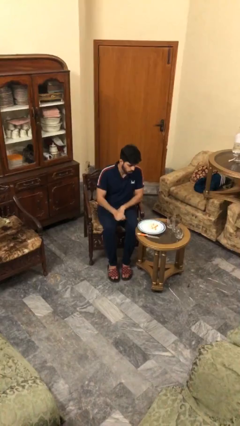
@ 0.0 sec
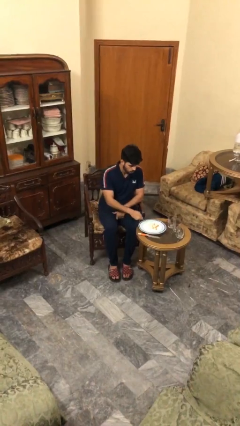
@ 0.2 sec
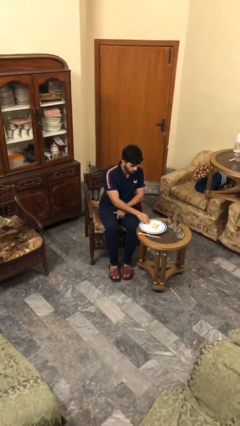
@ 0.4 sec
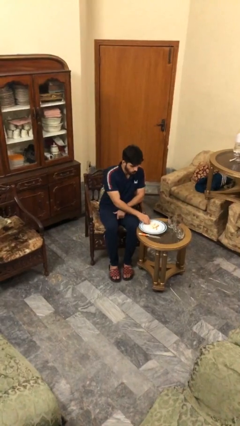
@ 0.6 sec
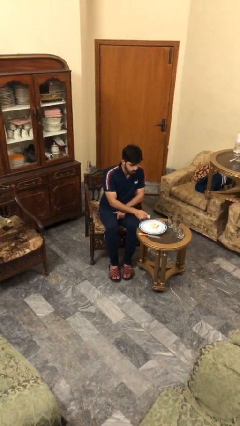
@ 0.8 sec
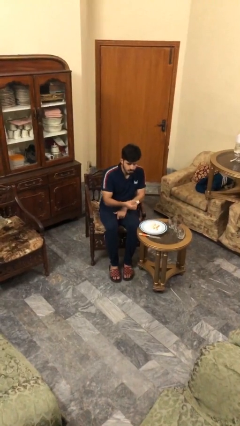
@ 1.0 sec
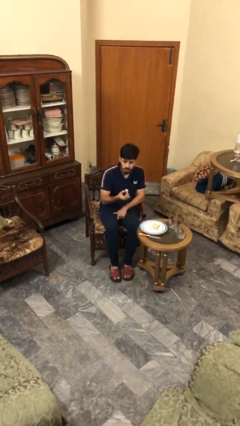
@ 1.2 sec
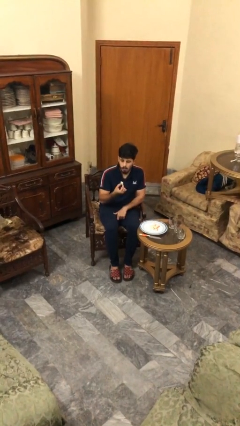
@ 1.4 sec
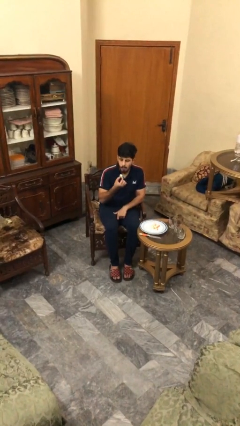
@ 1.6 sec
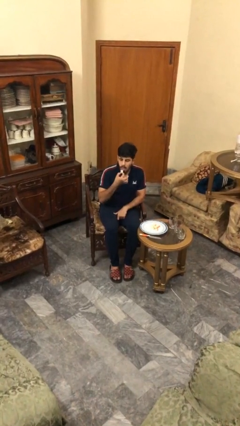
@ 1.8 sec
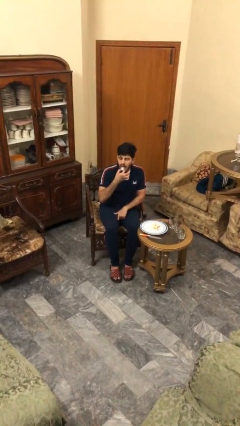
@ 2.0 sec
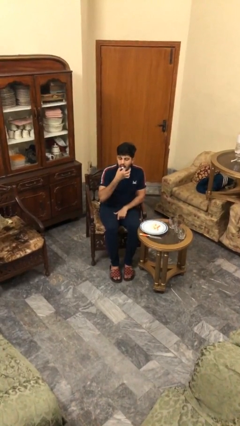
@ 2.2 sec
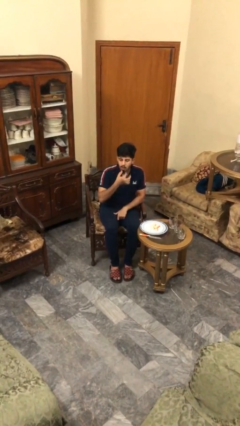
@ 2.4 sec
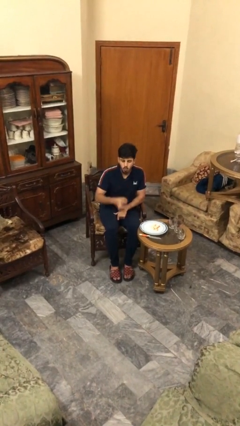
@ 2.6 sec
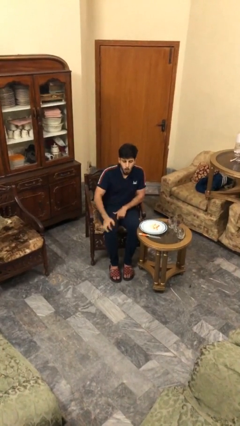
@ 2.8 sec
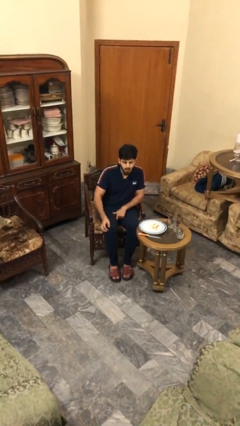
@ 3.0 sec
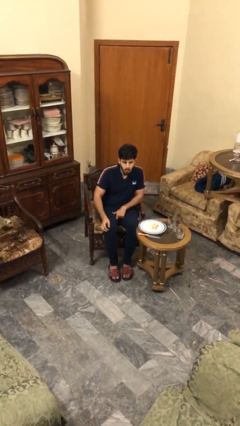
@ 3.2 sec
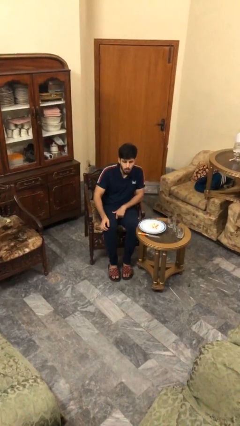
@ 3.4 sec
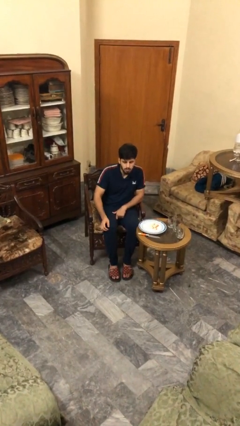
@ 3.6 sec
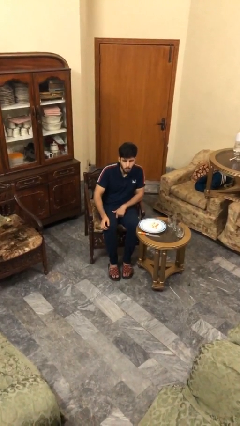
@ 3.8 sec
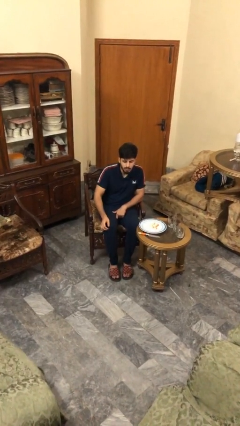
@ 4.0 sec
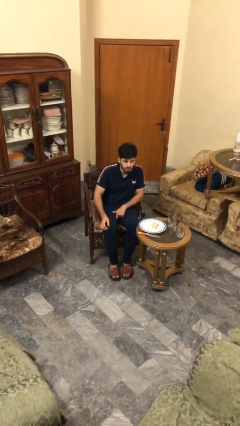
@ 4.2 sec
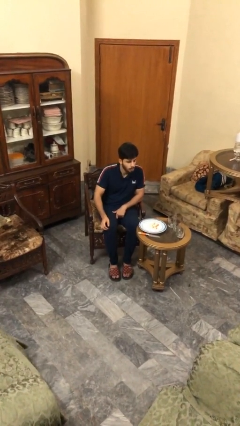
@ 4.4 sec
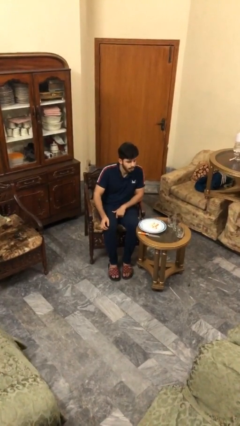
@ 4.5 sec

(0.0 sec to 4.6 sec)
person eats with hands

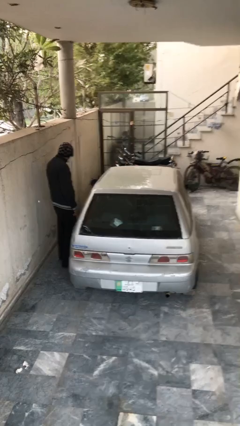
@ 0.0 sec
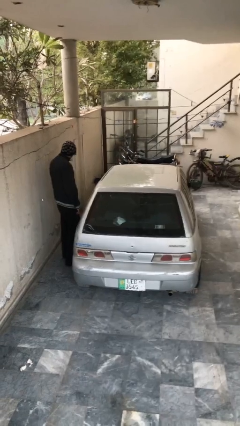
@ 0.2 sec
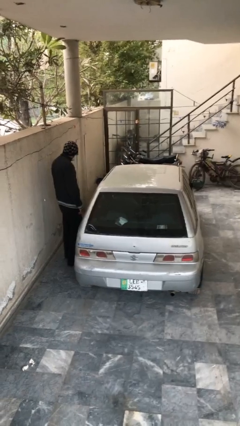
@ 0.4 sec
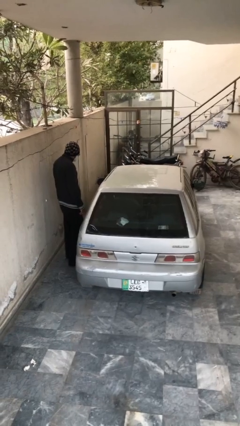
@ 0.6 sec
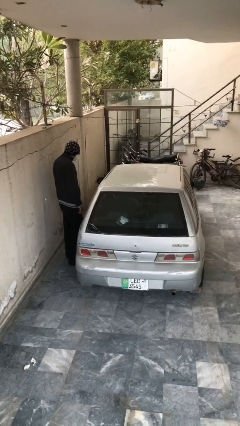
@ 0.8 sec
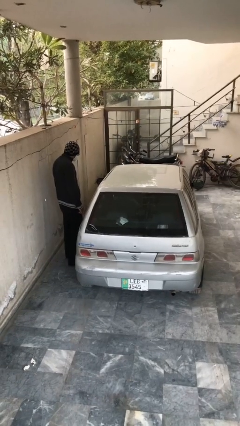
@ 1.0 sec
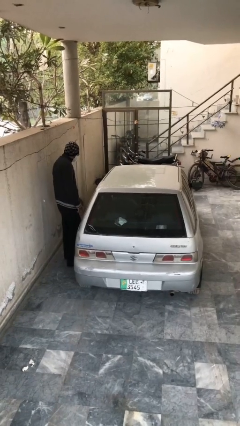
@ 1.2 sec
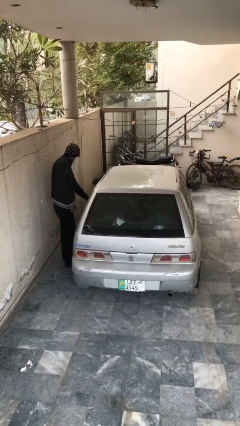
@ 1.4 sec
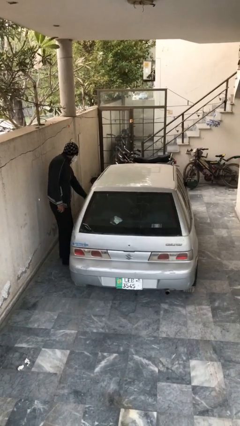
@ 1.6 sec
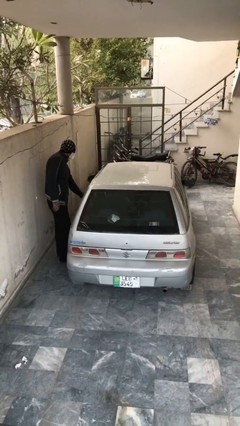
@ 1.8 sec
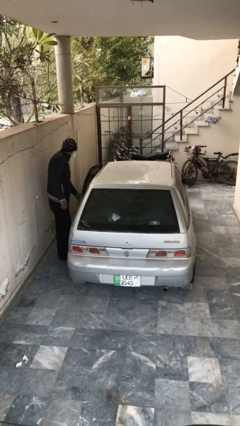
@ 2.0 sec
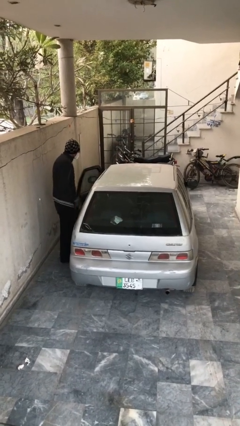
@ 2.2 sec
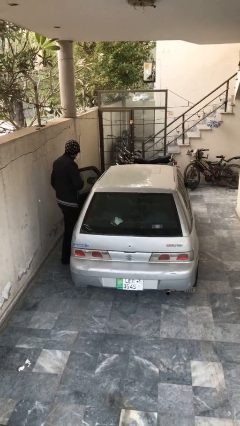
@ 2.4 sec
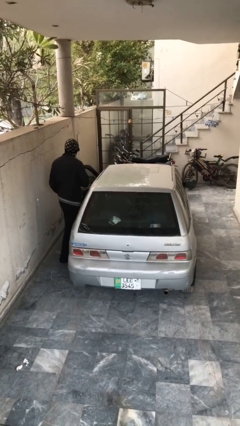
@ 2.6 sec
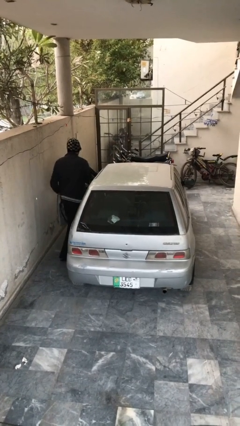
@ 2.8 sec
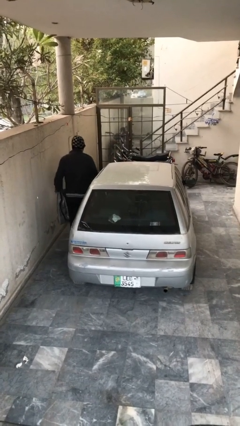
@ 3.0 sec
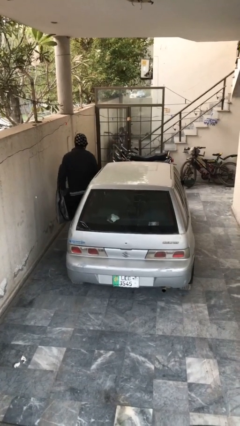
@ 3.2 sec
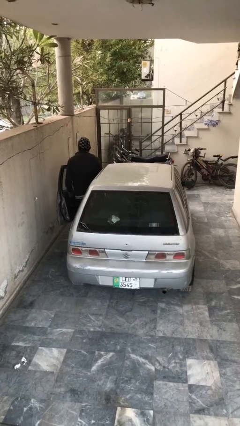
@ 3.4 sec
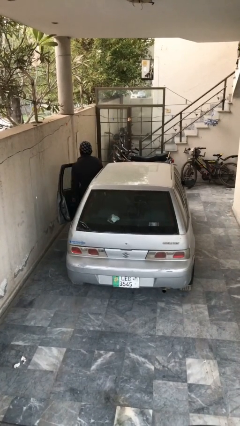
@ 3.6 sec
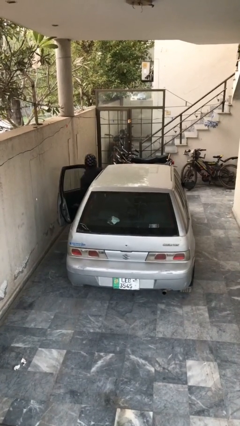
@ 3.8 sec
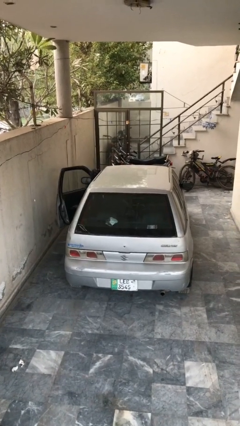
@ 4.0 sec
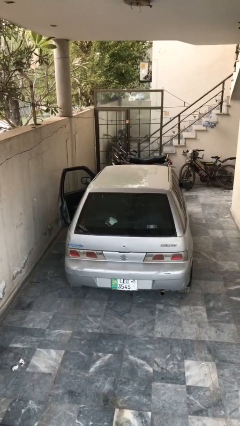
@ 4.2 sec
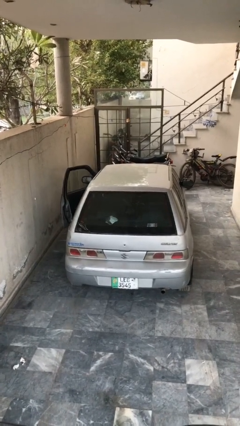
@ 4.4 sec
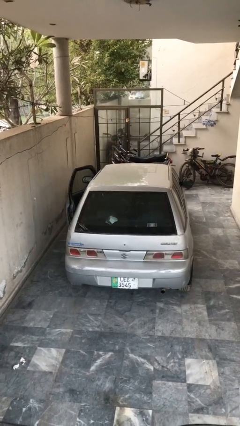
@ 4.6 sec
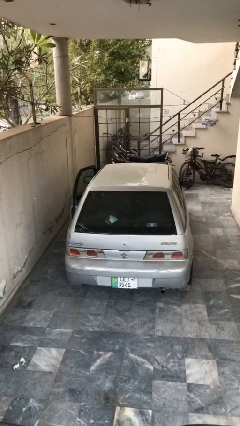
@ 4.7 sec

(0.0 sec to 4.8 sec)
car picks up person

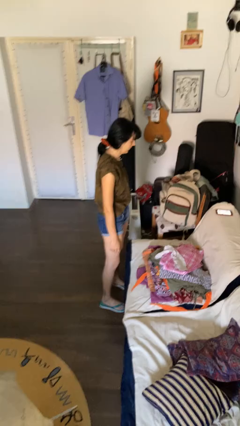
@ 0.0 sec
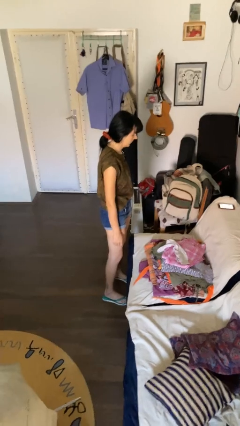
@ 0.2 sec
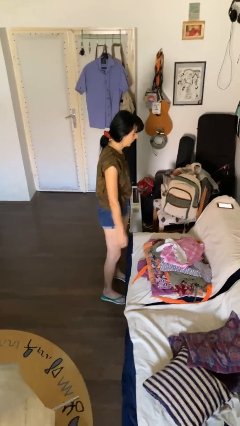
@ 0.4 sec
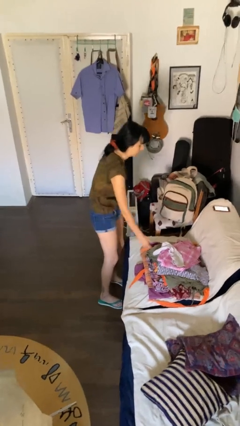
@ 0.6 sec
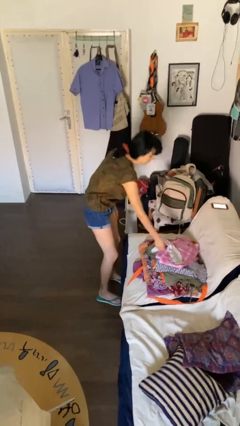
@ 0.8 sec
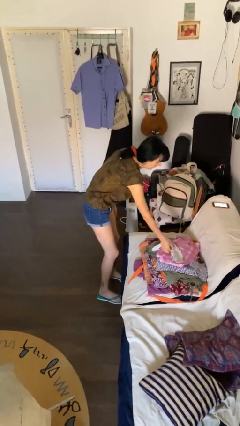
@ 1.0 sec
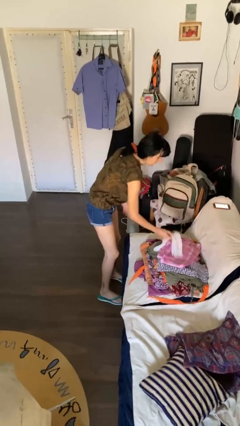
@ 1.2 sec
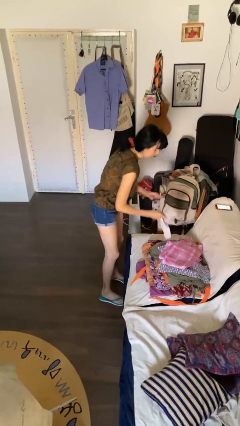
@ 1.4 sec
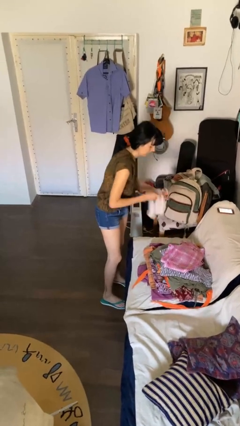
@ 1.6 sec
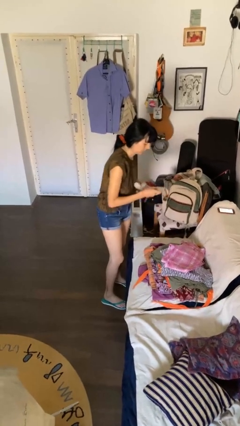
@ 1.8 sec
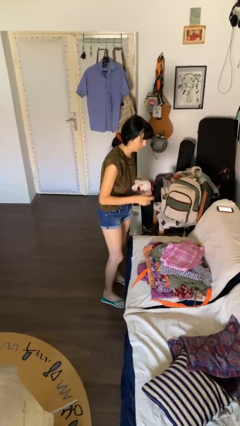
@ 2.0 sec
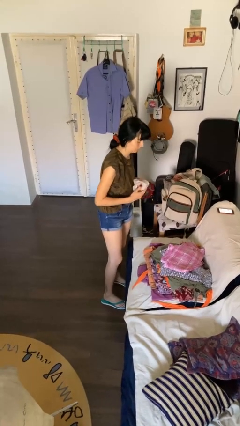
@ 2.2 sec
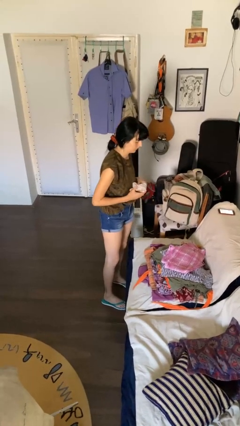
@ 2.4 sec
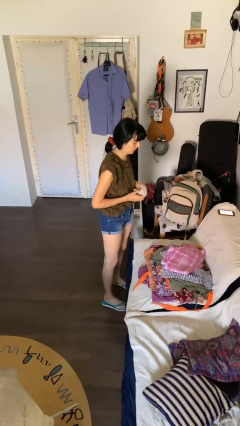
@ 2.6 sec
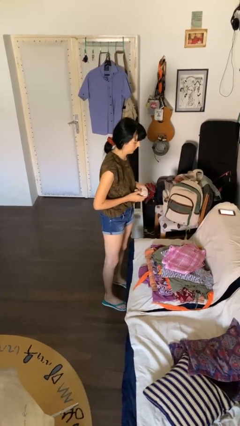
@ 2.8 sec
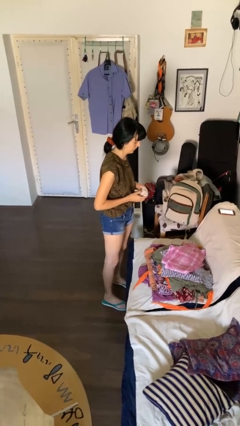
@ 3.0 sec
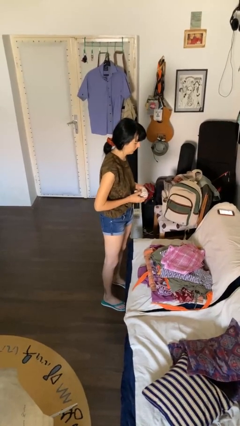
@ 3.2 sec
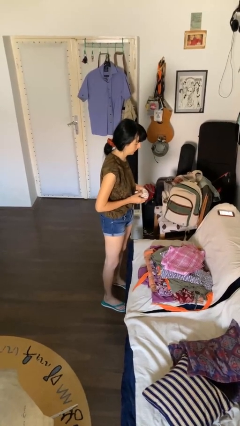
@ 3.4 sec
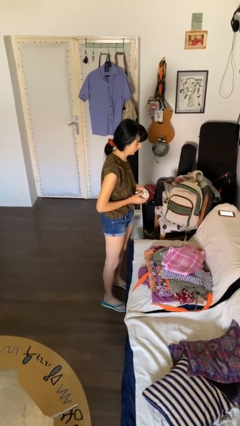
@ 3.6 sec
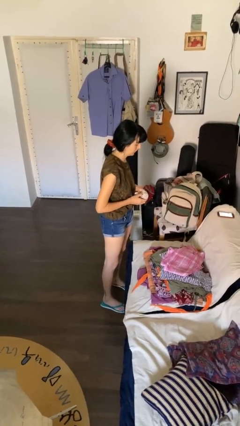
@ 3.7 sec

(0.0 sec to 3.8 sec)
person folds socks

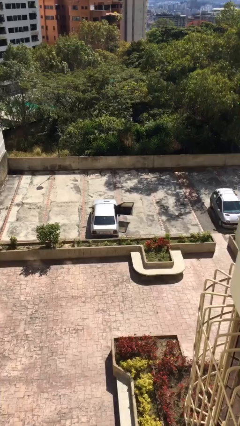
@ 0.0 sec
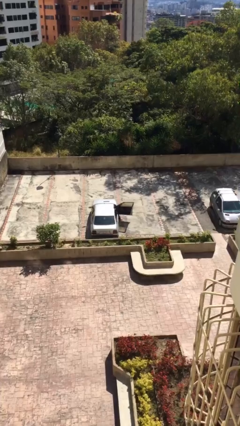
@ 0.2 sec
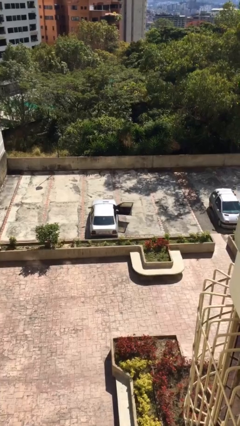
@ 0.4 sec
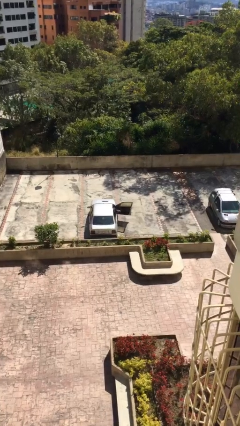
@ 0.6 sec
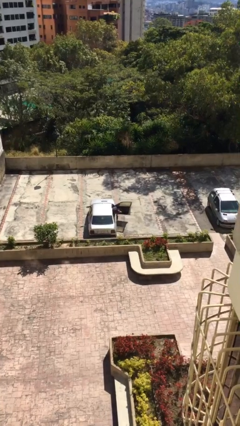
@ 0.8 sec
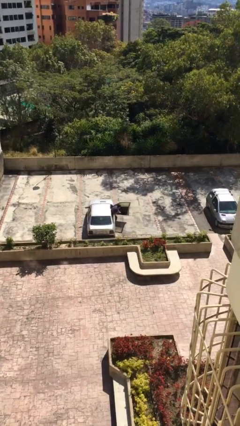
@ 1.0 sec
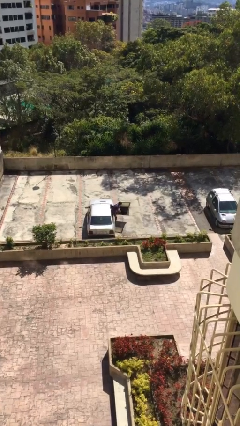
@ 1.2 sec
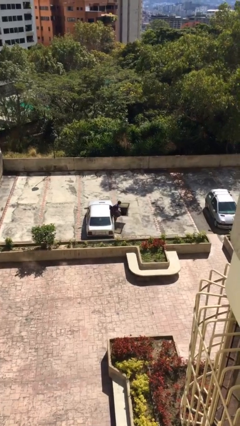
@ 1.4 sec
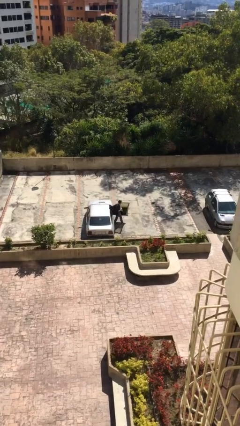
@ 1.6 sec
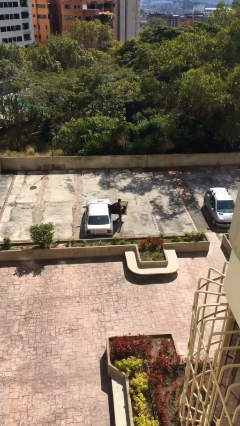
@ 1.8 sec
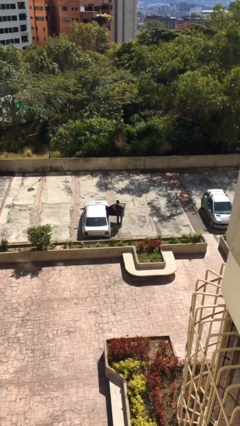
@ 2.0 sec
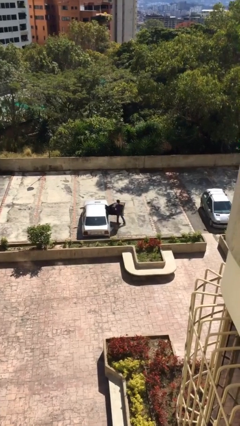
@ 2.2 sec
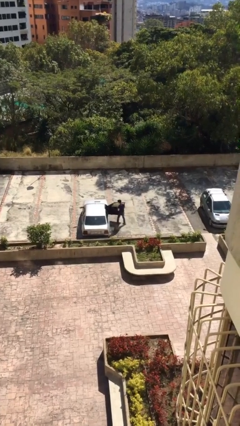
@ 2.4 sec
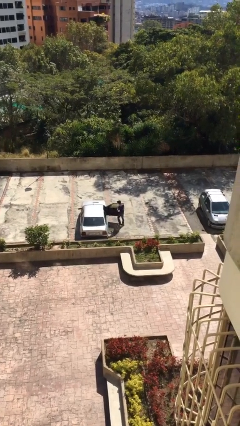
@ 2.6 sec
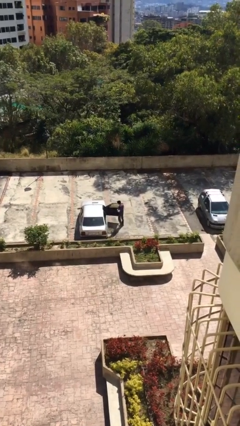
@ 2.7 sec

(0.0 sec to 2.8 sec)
person exits car

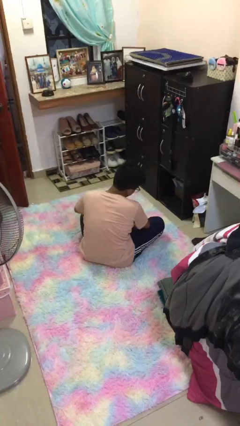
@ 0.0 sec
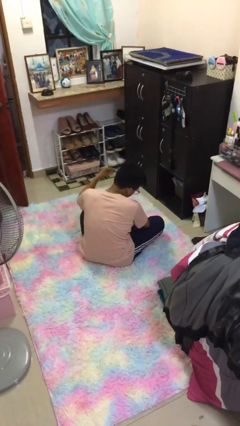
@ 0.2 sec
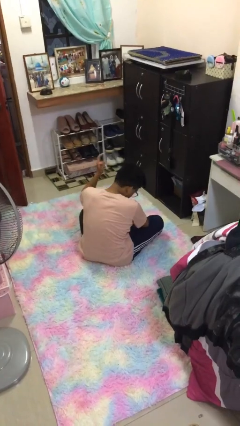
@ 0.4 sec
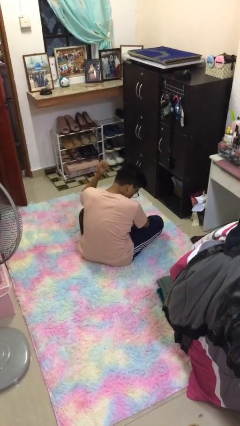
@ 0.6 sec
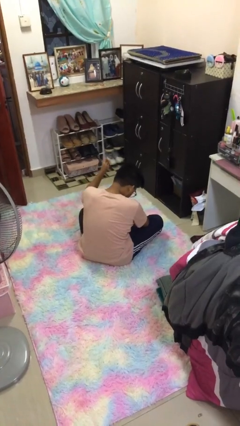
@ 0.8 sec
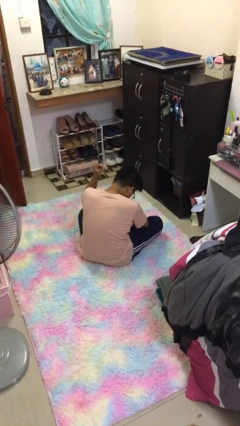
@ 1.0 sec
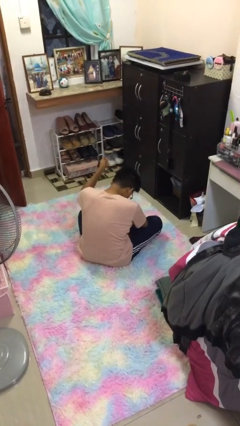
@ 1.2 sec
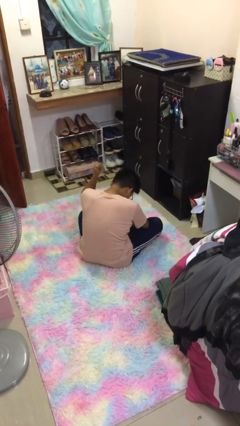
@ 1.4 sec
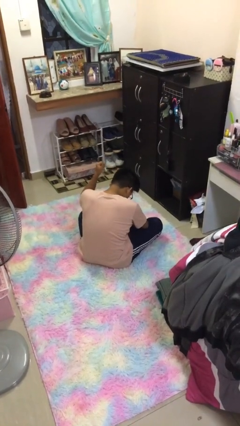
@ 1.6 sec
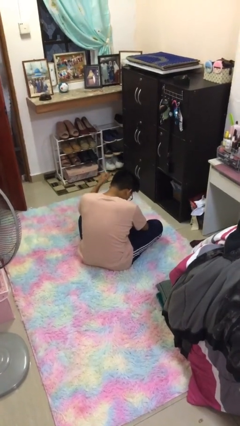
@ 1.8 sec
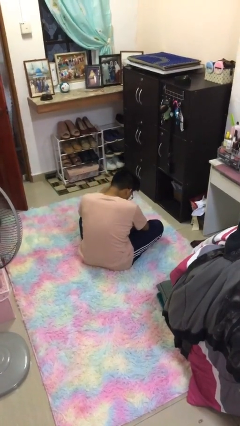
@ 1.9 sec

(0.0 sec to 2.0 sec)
person snaps fingers
